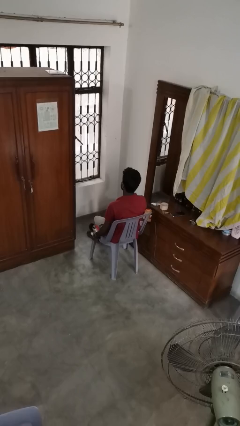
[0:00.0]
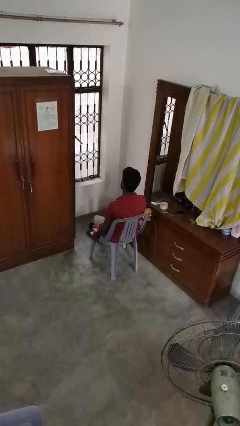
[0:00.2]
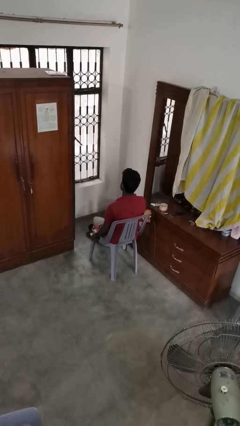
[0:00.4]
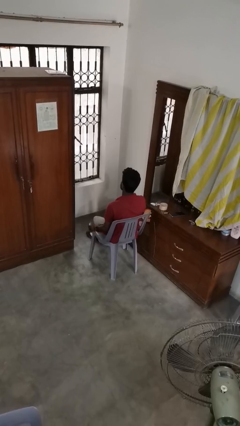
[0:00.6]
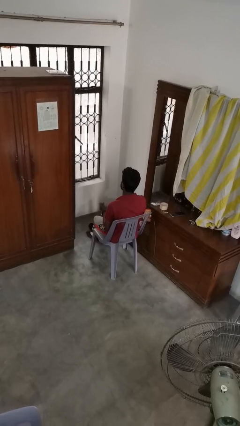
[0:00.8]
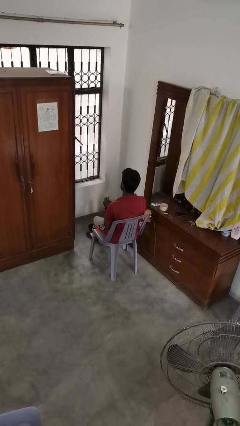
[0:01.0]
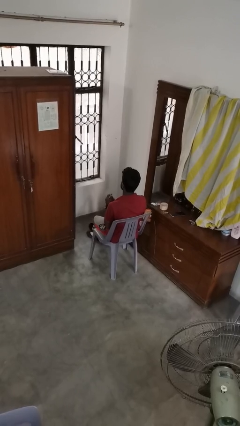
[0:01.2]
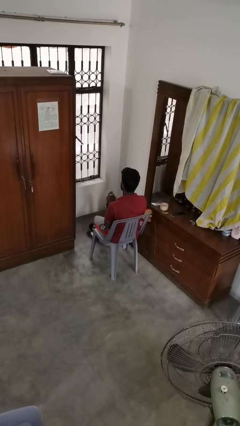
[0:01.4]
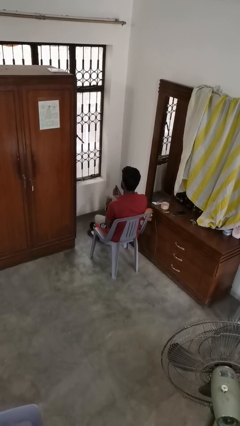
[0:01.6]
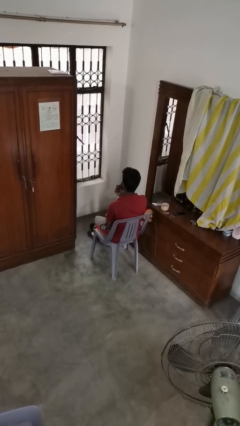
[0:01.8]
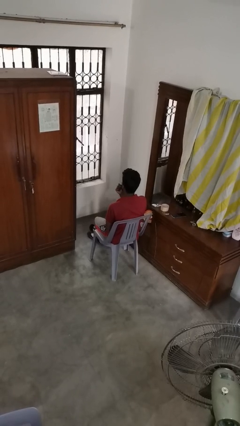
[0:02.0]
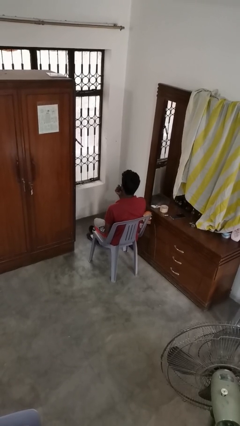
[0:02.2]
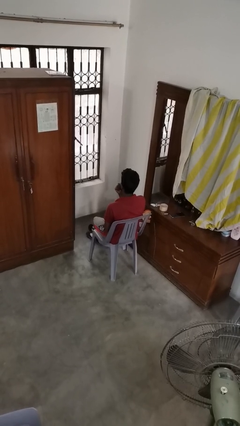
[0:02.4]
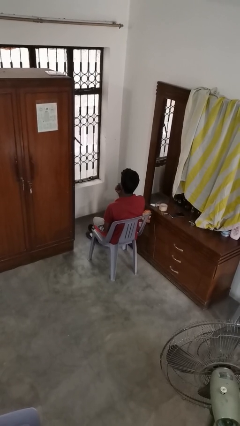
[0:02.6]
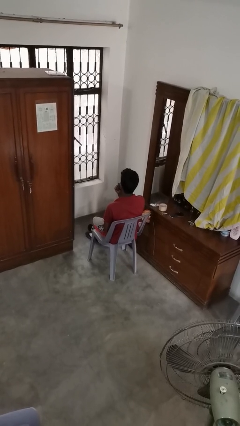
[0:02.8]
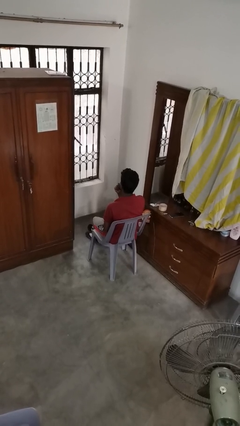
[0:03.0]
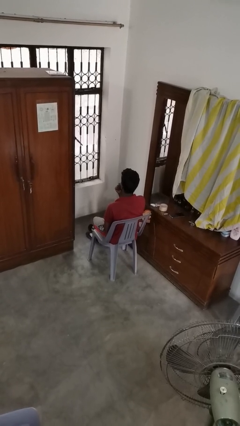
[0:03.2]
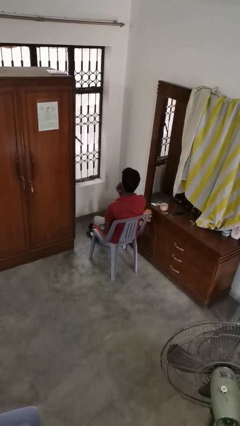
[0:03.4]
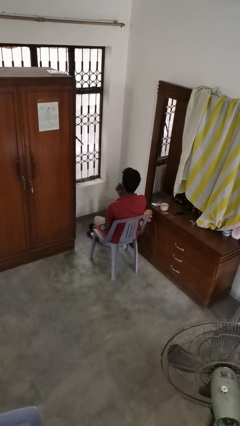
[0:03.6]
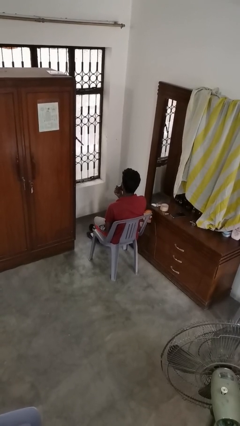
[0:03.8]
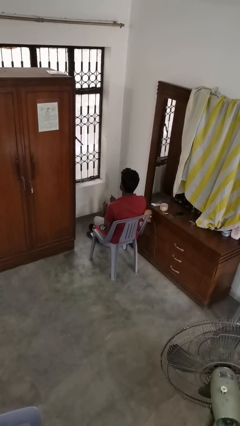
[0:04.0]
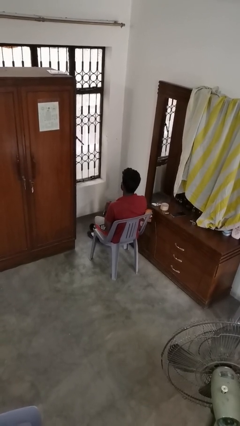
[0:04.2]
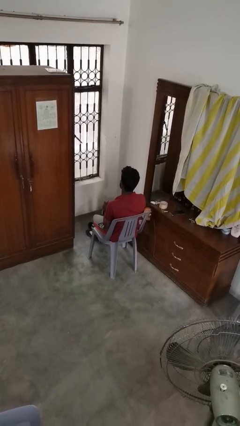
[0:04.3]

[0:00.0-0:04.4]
person applies lip makeup

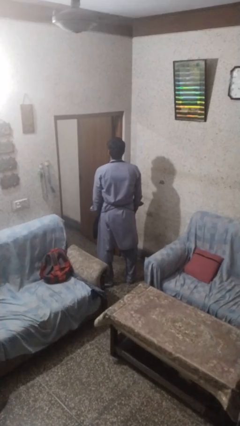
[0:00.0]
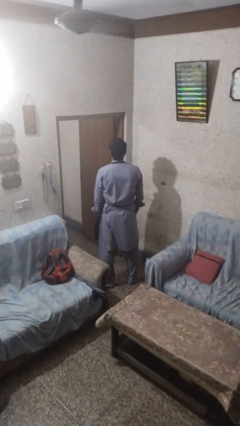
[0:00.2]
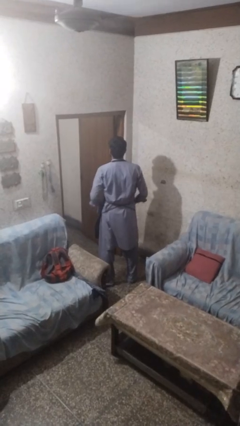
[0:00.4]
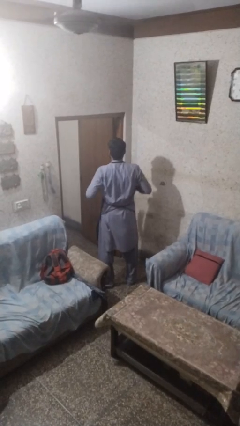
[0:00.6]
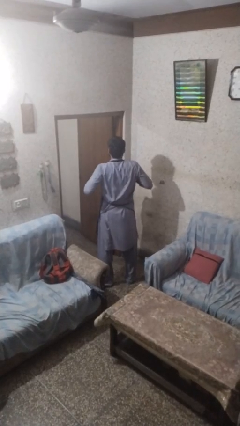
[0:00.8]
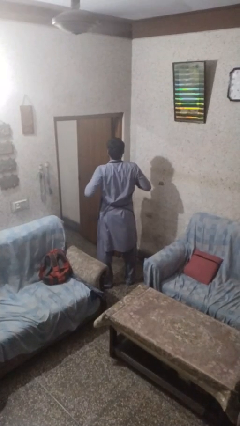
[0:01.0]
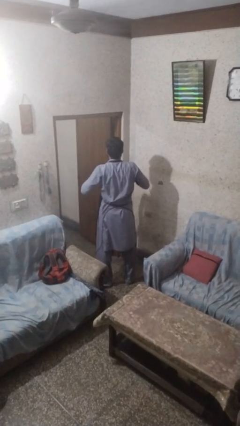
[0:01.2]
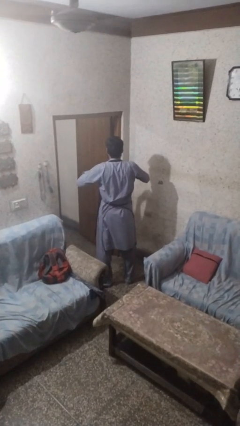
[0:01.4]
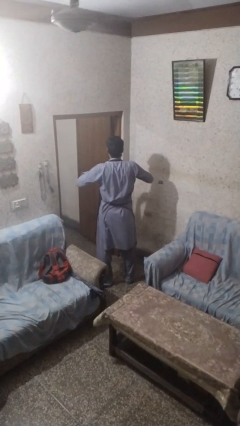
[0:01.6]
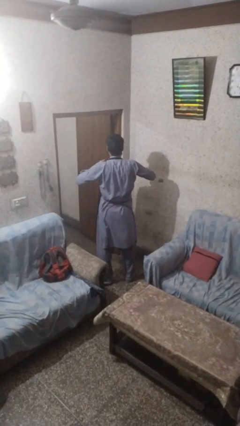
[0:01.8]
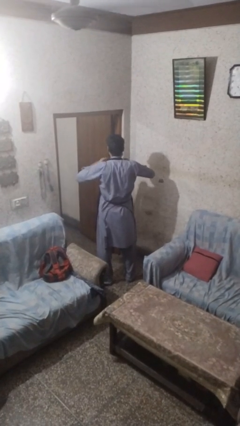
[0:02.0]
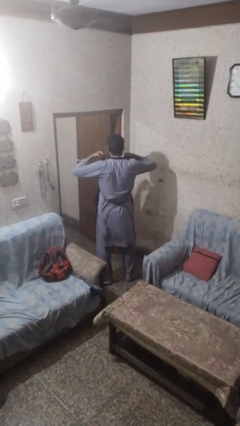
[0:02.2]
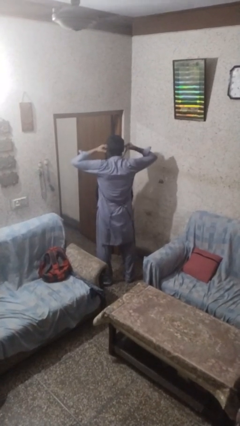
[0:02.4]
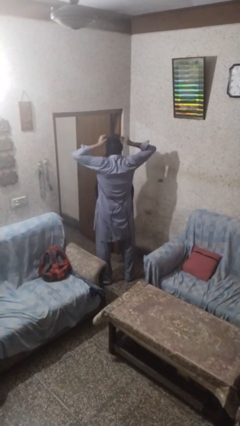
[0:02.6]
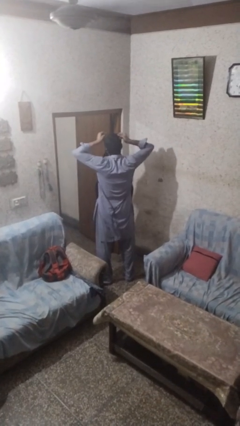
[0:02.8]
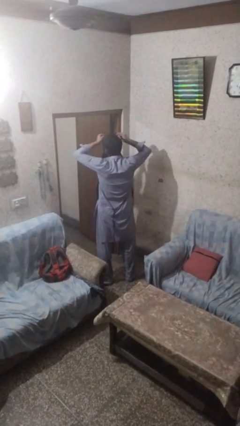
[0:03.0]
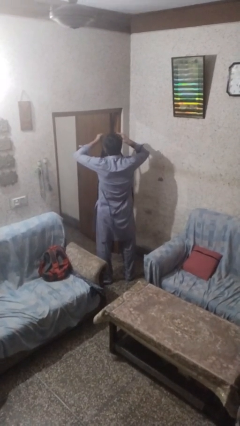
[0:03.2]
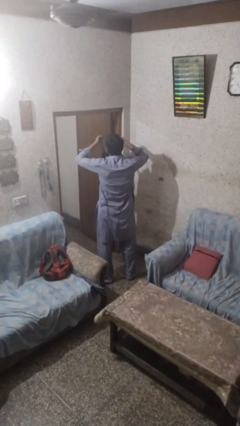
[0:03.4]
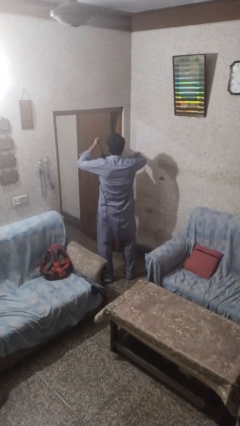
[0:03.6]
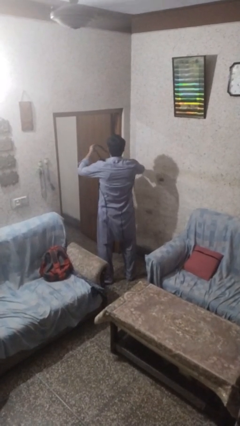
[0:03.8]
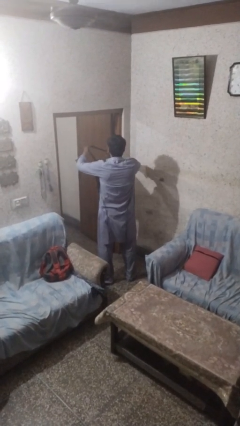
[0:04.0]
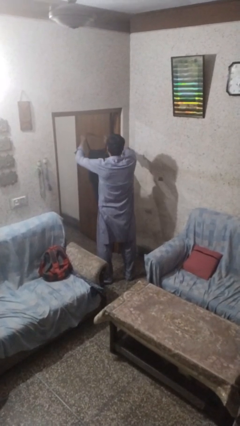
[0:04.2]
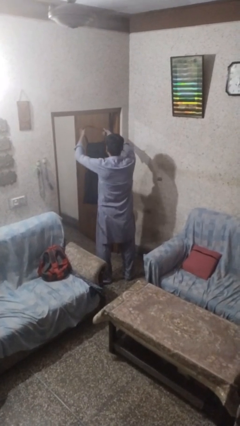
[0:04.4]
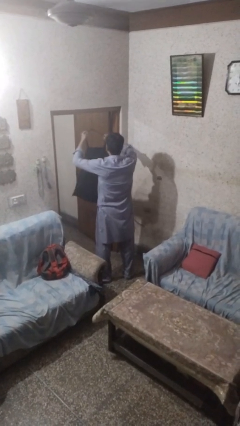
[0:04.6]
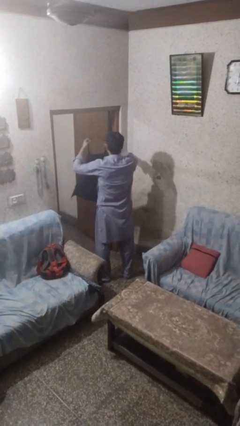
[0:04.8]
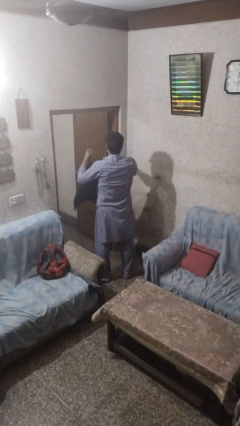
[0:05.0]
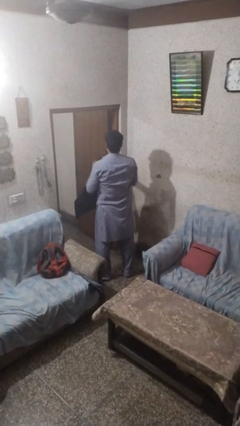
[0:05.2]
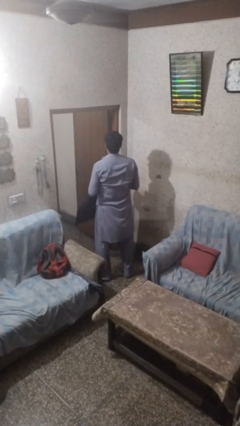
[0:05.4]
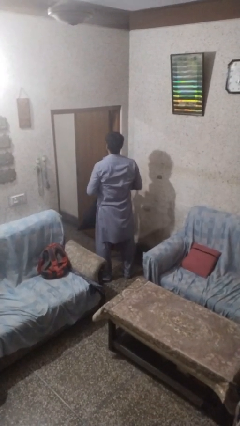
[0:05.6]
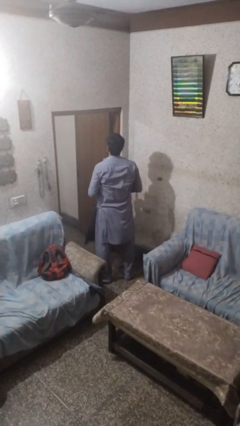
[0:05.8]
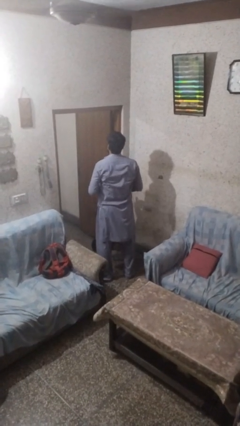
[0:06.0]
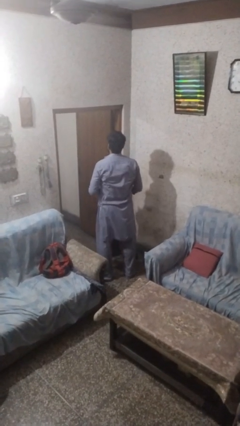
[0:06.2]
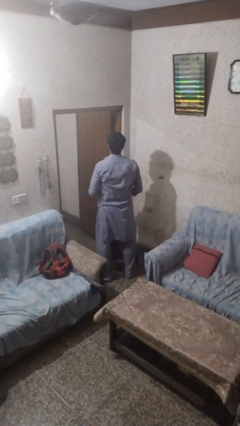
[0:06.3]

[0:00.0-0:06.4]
person takes off apron

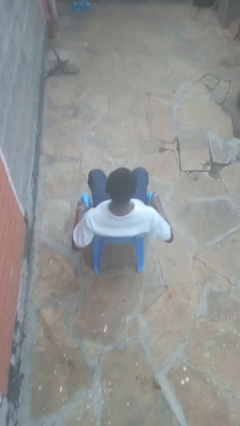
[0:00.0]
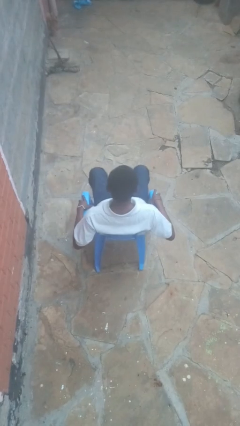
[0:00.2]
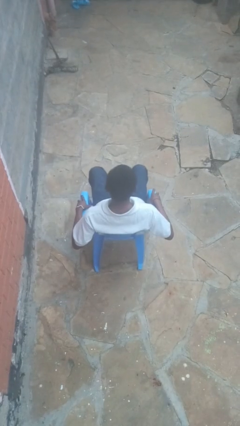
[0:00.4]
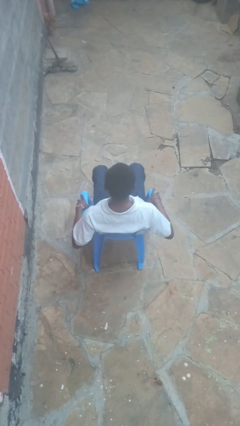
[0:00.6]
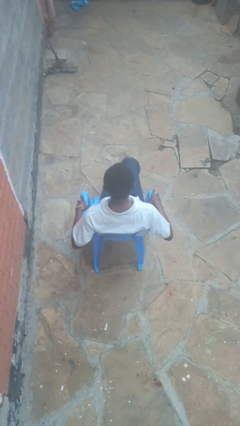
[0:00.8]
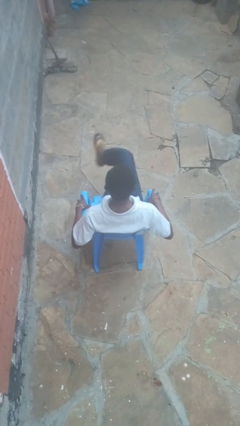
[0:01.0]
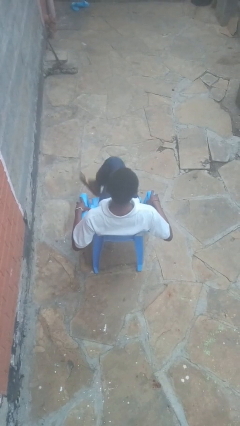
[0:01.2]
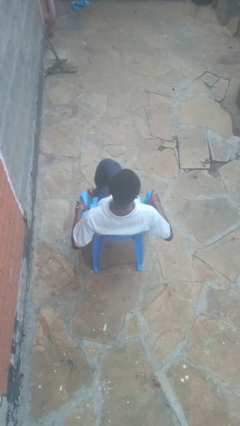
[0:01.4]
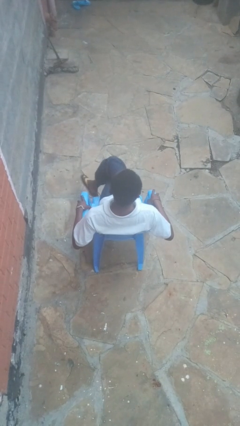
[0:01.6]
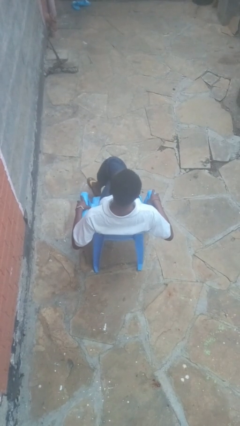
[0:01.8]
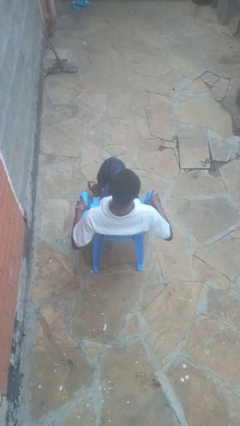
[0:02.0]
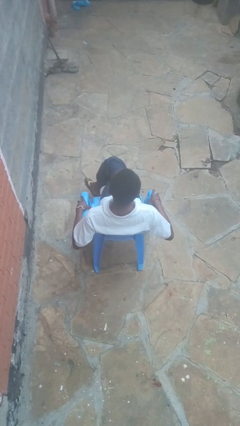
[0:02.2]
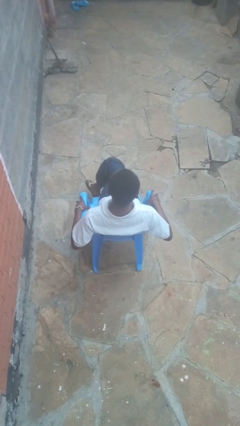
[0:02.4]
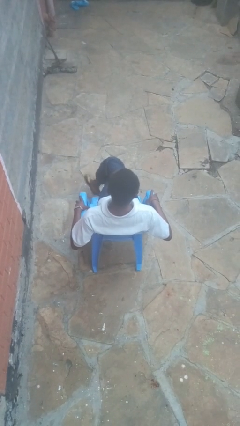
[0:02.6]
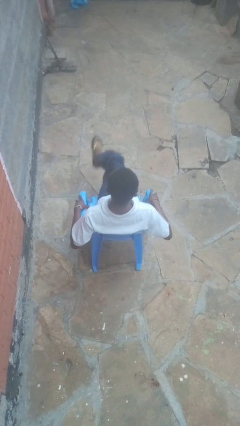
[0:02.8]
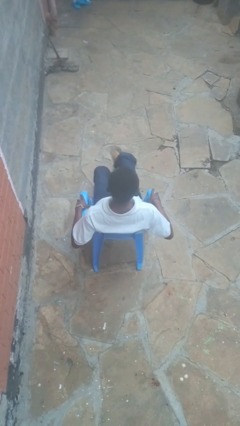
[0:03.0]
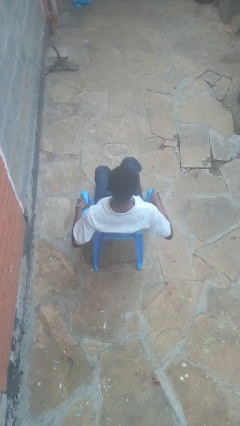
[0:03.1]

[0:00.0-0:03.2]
person crosses legs

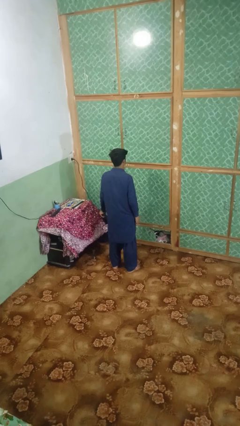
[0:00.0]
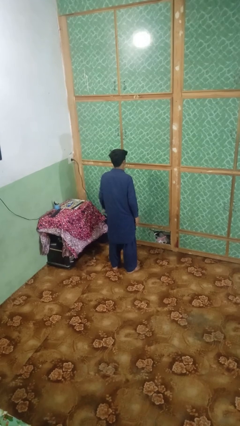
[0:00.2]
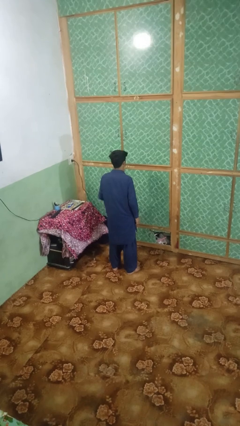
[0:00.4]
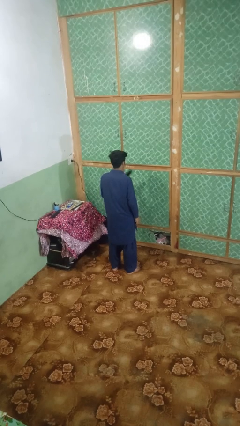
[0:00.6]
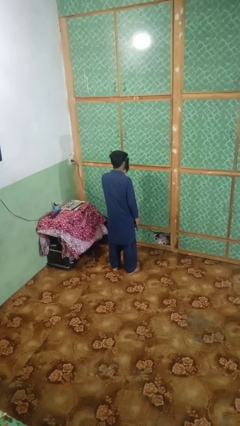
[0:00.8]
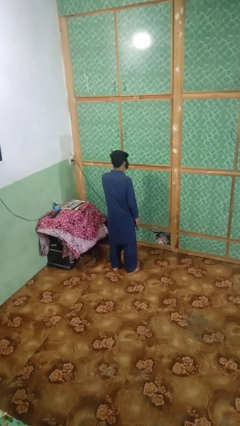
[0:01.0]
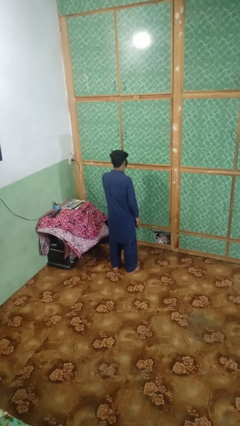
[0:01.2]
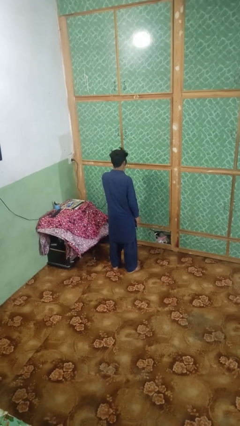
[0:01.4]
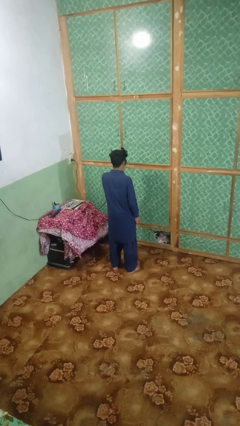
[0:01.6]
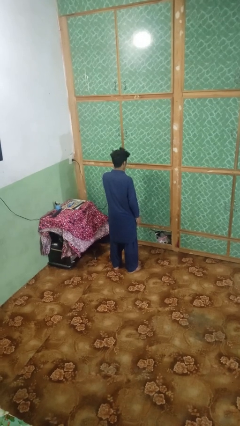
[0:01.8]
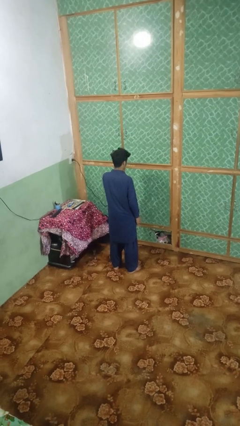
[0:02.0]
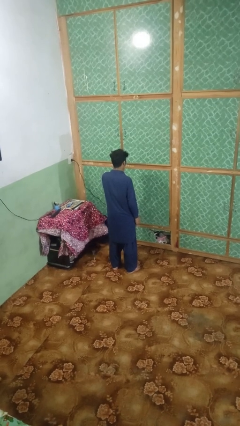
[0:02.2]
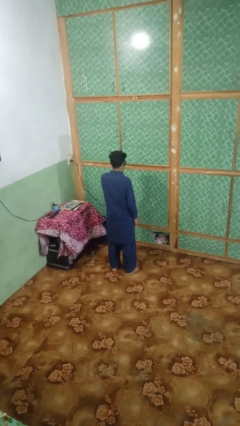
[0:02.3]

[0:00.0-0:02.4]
person dries hair with hairdryer

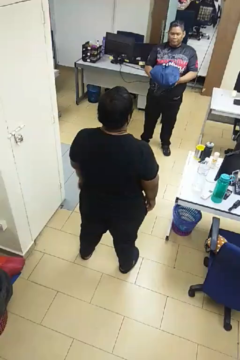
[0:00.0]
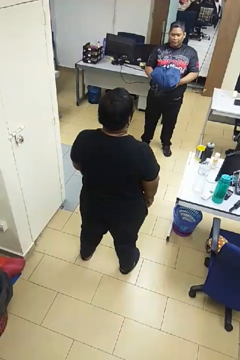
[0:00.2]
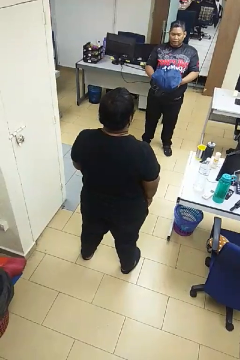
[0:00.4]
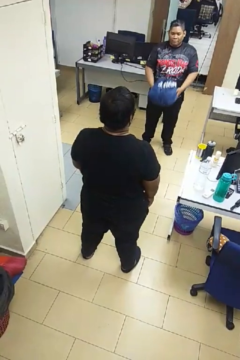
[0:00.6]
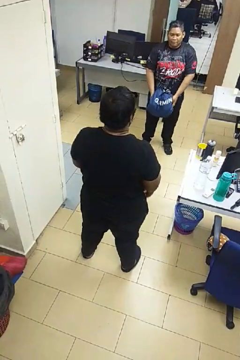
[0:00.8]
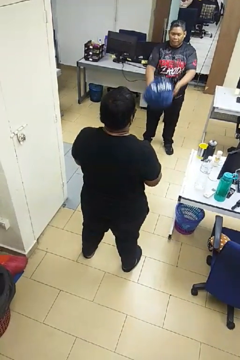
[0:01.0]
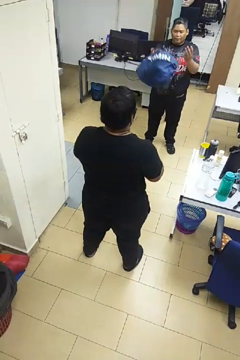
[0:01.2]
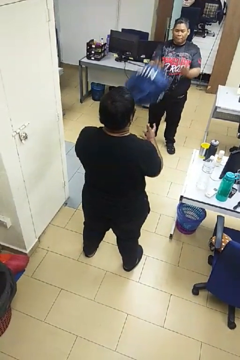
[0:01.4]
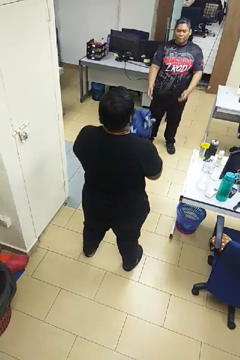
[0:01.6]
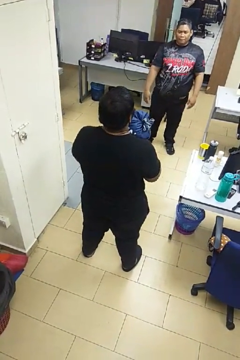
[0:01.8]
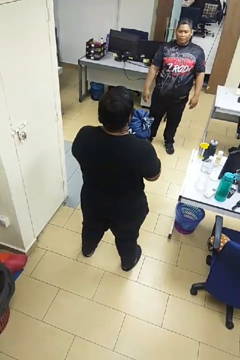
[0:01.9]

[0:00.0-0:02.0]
person catches object from person
